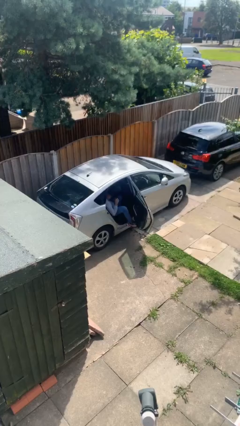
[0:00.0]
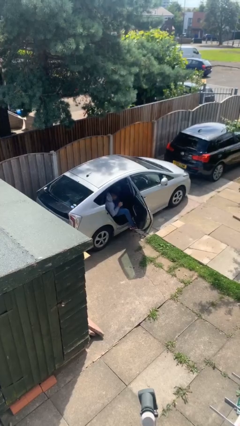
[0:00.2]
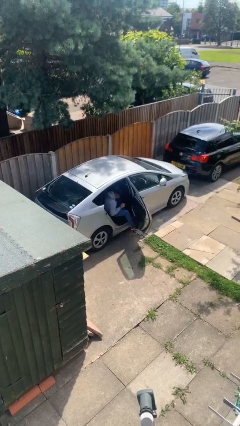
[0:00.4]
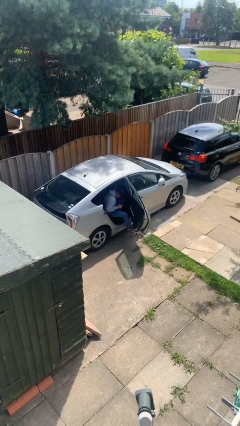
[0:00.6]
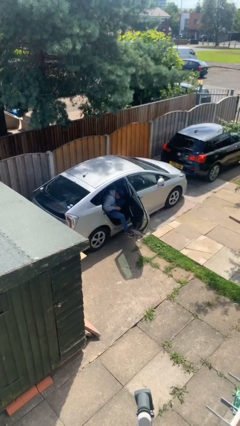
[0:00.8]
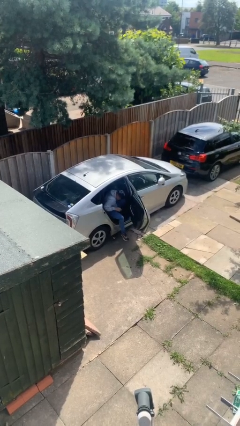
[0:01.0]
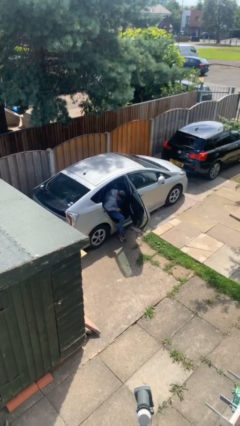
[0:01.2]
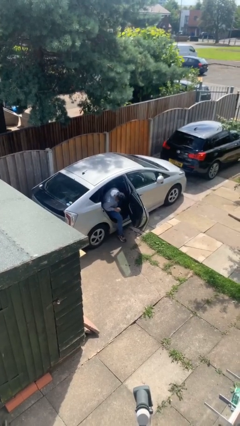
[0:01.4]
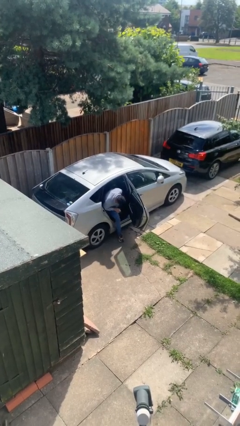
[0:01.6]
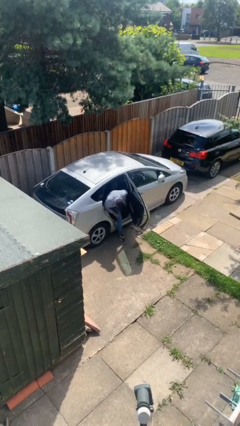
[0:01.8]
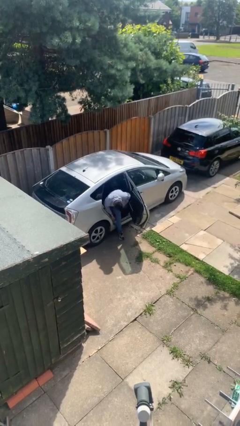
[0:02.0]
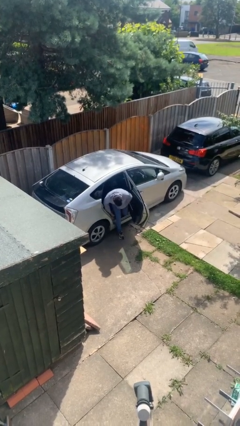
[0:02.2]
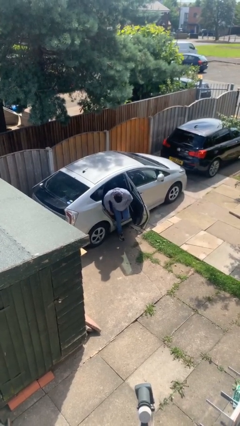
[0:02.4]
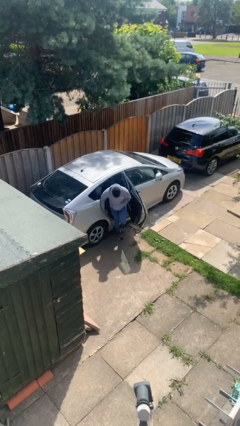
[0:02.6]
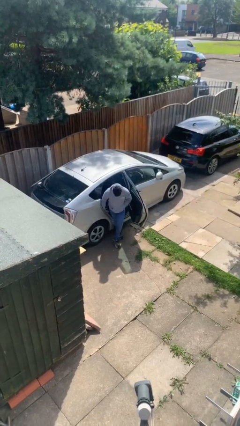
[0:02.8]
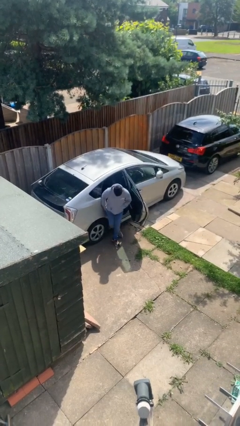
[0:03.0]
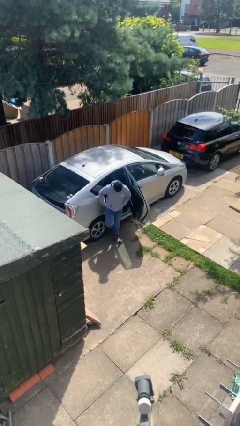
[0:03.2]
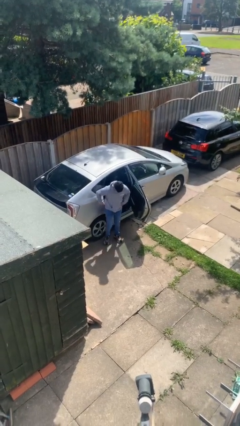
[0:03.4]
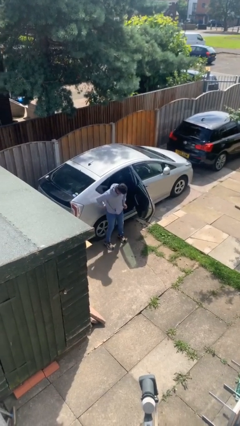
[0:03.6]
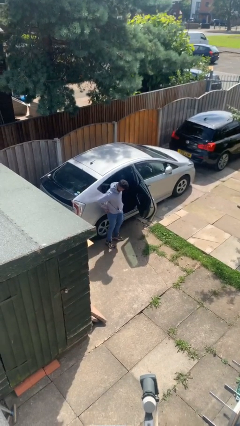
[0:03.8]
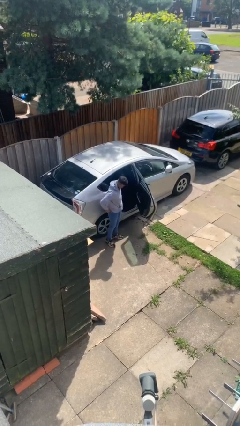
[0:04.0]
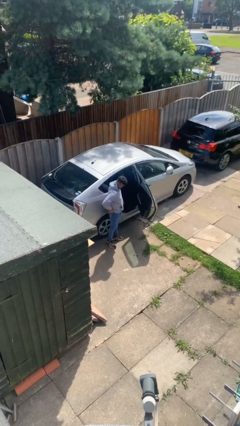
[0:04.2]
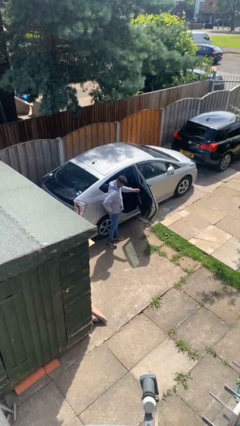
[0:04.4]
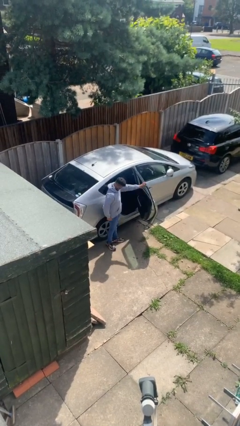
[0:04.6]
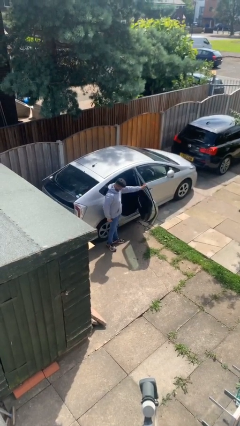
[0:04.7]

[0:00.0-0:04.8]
person exits car

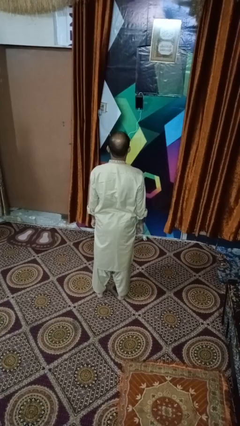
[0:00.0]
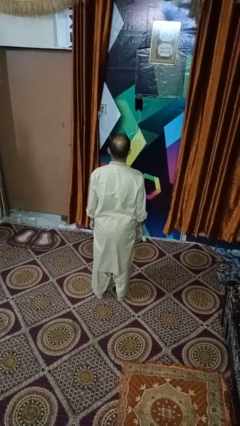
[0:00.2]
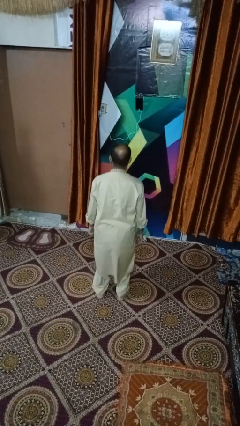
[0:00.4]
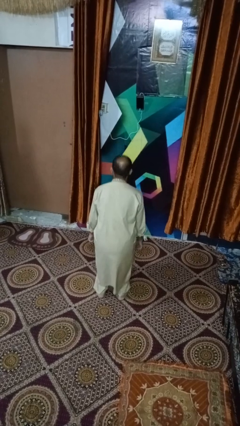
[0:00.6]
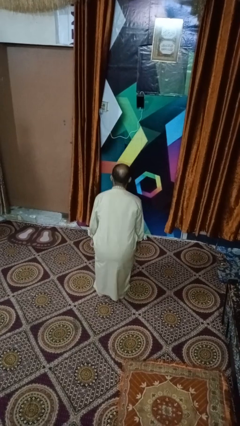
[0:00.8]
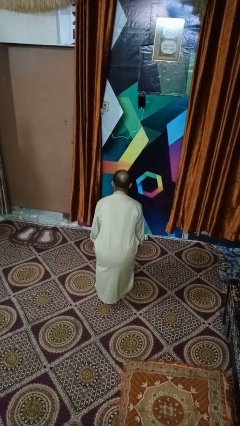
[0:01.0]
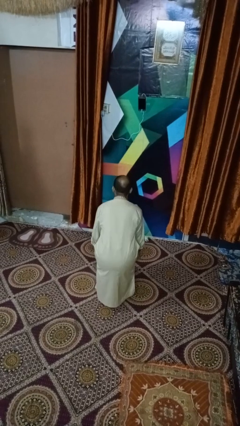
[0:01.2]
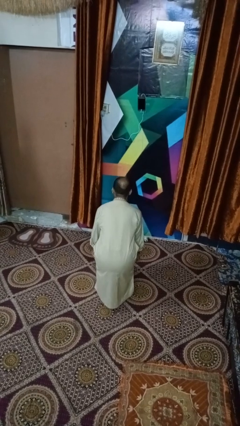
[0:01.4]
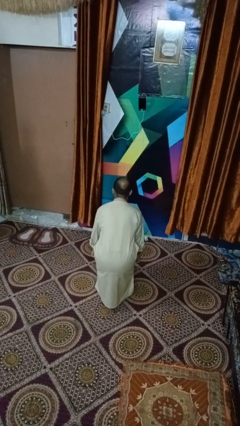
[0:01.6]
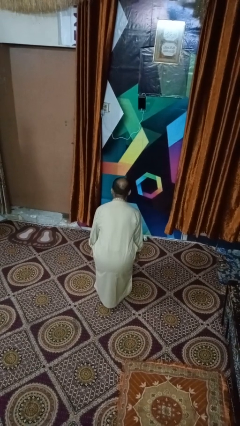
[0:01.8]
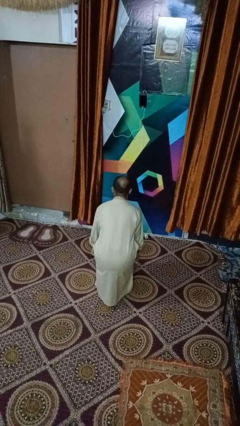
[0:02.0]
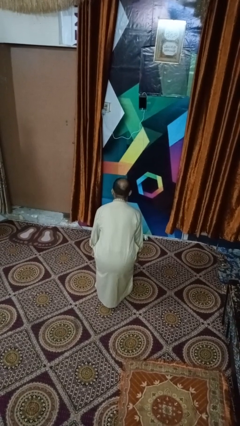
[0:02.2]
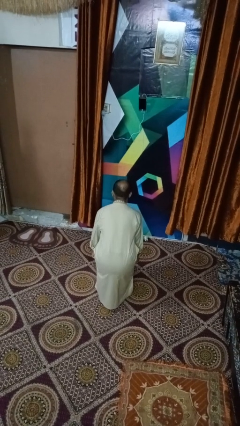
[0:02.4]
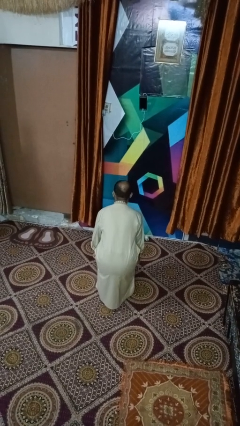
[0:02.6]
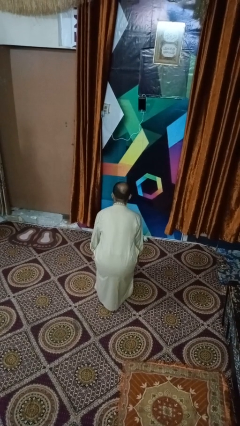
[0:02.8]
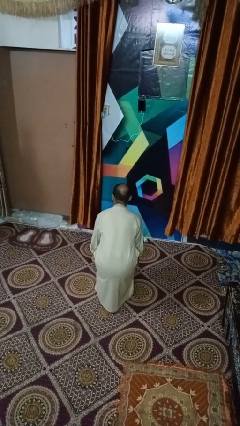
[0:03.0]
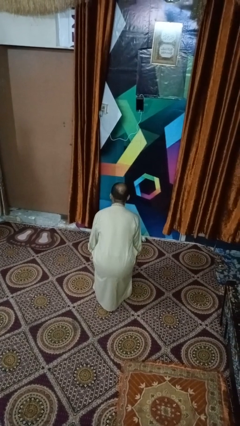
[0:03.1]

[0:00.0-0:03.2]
person squats

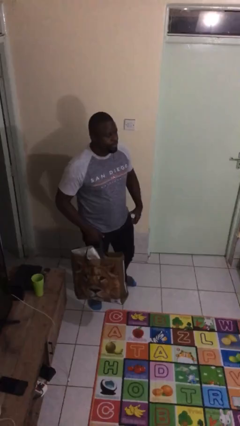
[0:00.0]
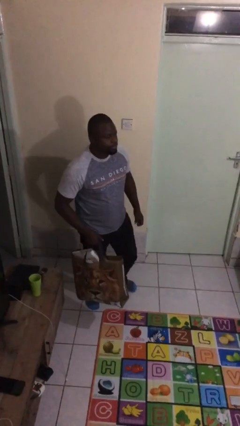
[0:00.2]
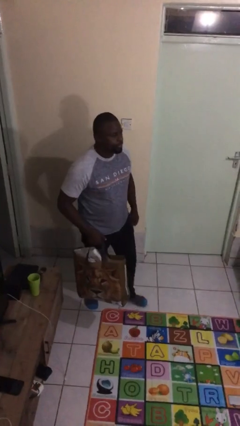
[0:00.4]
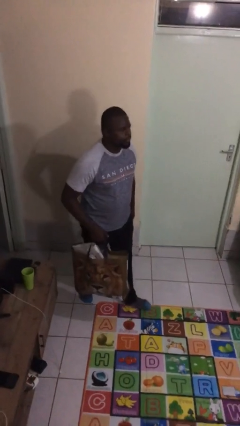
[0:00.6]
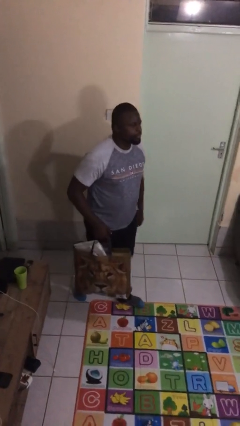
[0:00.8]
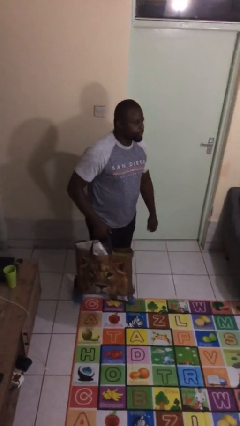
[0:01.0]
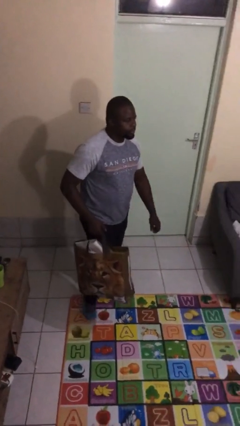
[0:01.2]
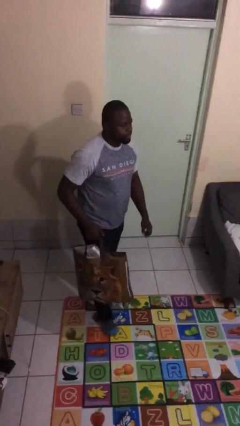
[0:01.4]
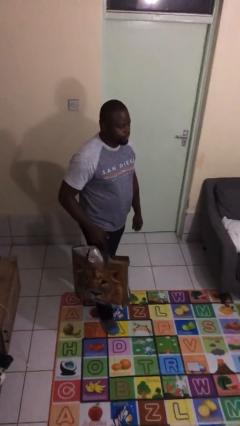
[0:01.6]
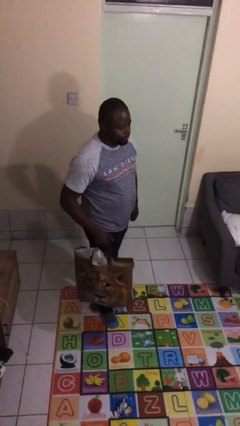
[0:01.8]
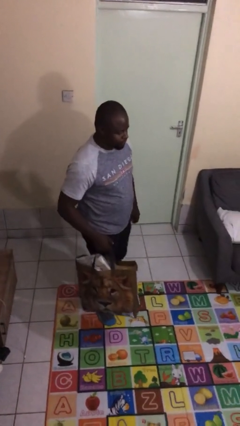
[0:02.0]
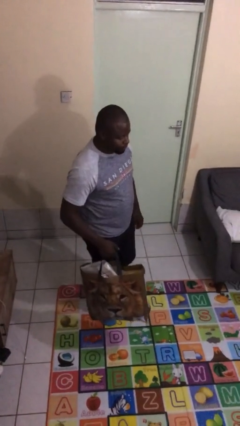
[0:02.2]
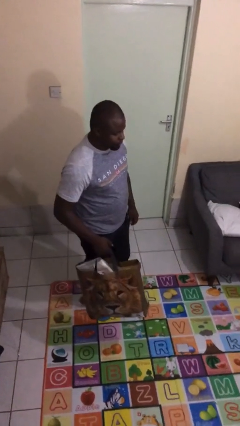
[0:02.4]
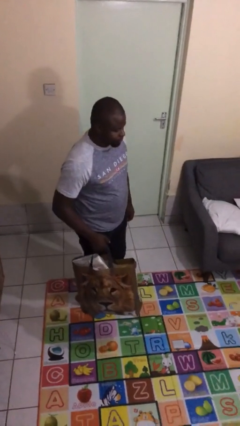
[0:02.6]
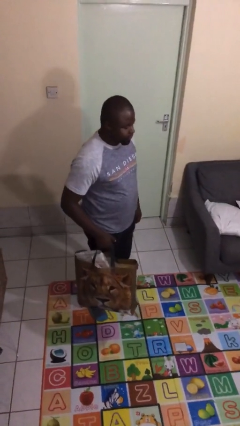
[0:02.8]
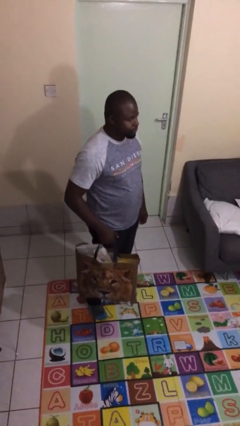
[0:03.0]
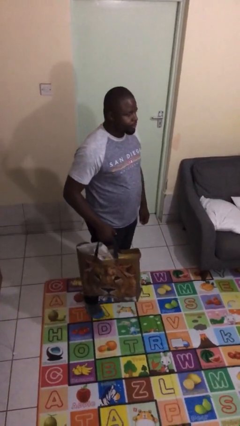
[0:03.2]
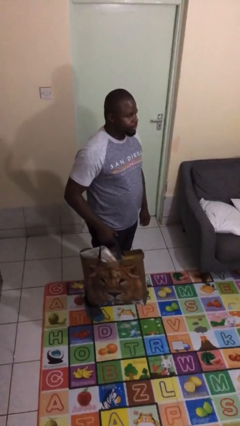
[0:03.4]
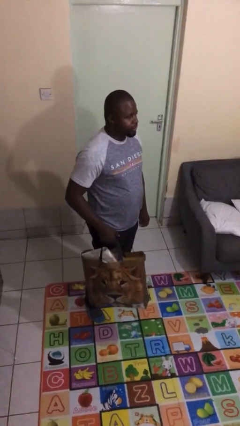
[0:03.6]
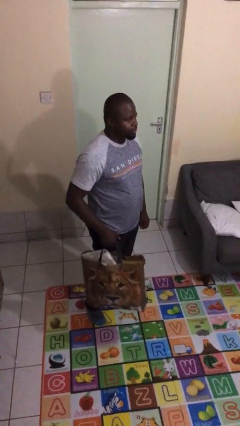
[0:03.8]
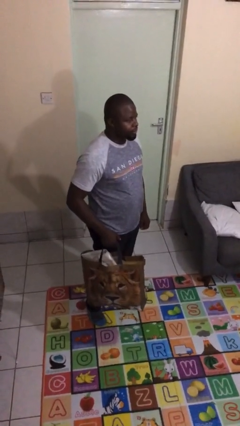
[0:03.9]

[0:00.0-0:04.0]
person carries groceries

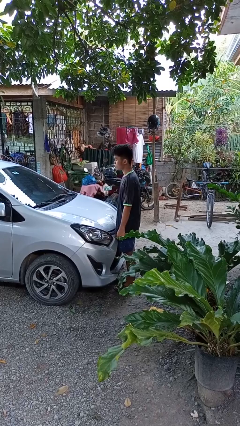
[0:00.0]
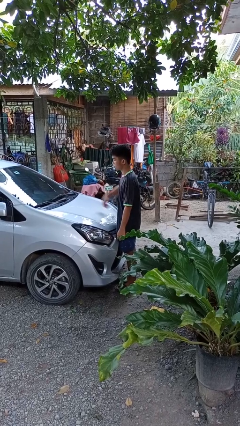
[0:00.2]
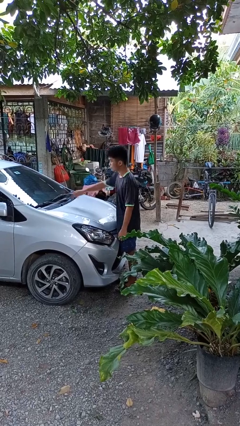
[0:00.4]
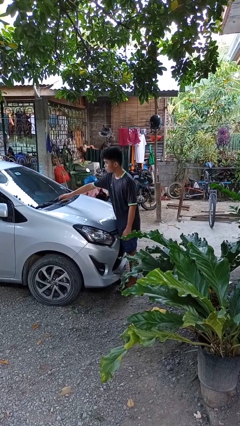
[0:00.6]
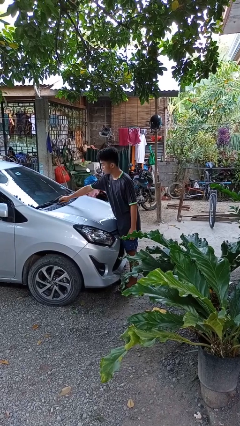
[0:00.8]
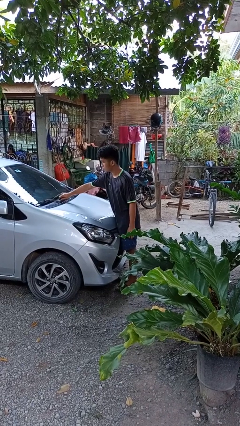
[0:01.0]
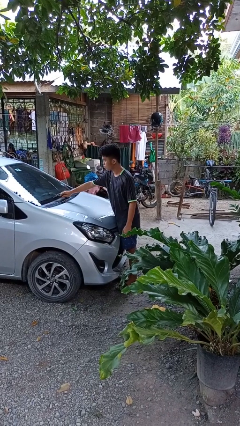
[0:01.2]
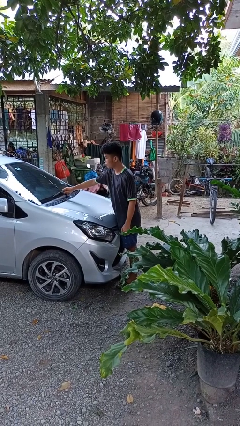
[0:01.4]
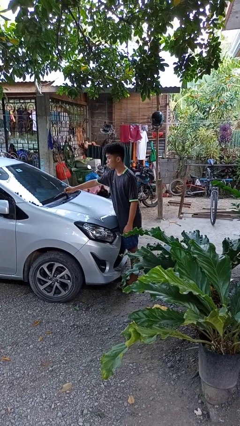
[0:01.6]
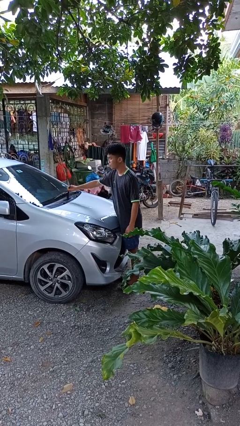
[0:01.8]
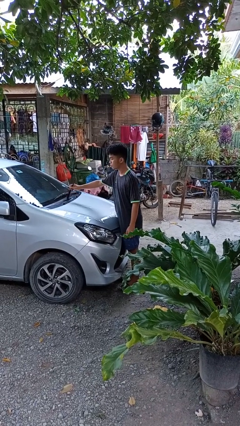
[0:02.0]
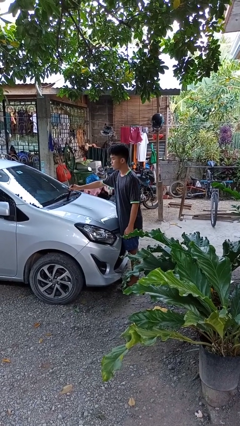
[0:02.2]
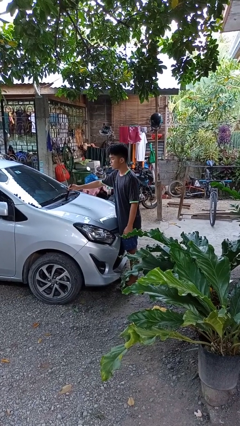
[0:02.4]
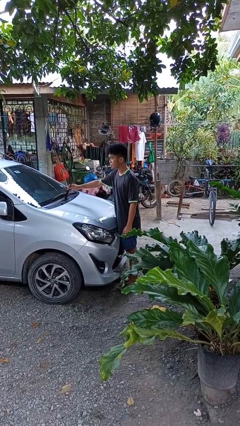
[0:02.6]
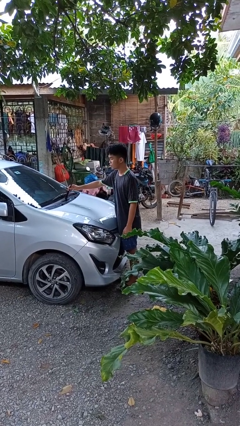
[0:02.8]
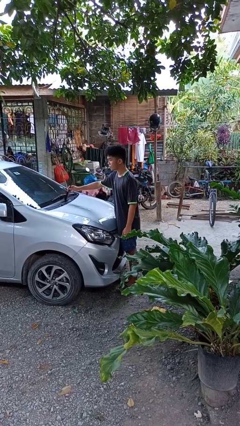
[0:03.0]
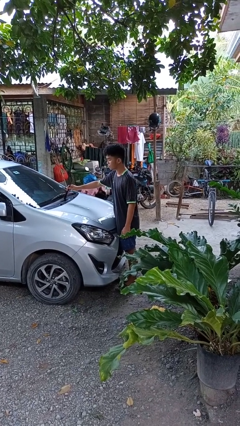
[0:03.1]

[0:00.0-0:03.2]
person flips up car wipers

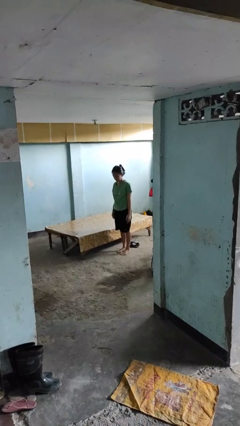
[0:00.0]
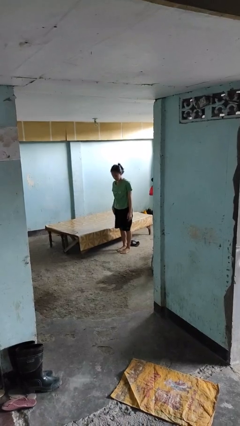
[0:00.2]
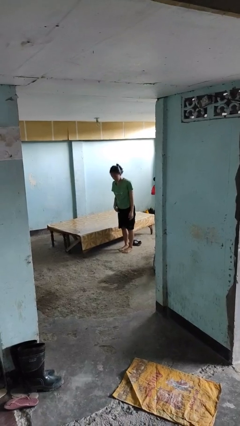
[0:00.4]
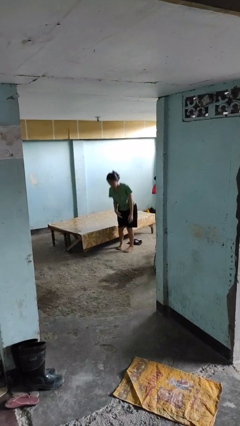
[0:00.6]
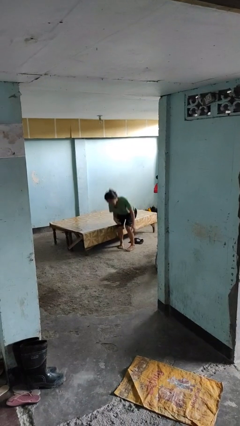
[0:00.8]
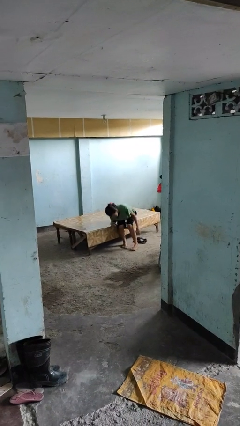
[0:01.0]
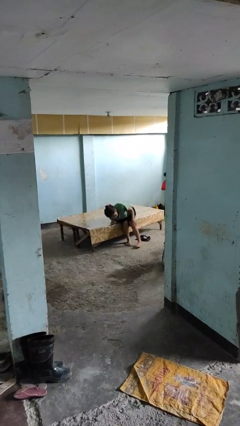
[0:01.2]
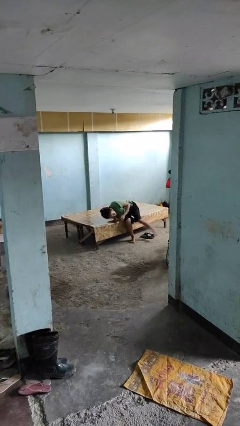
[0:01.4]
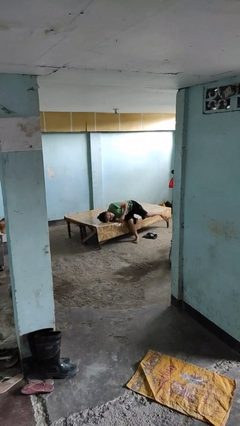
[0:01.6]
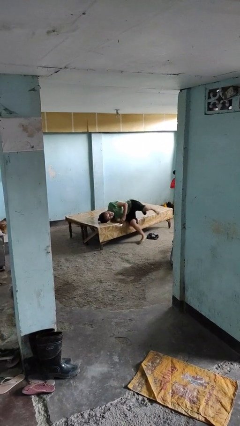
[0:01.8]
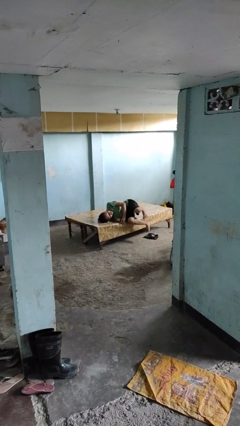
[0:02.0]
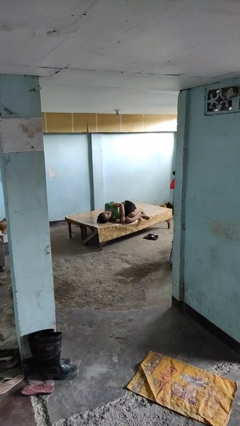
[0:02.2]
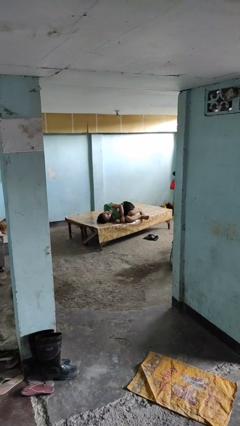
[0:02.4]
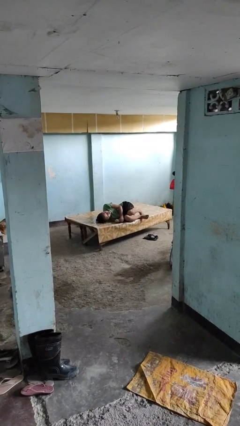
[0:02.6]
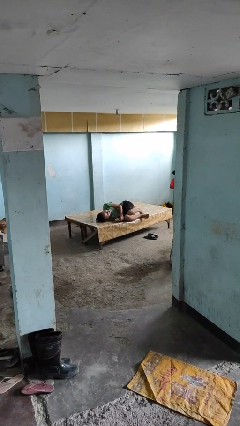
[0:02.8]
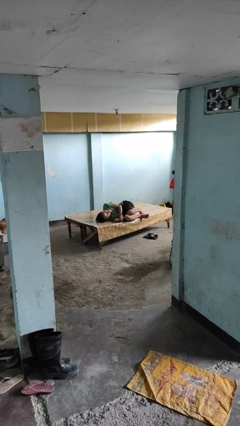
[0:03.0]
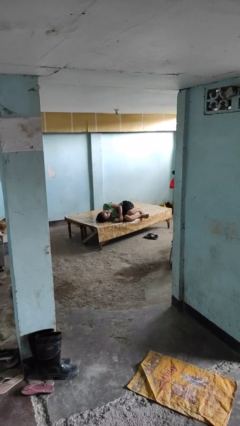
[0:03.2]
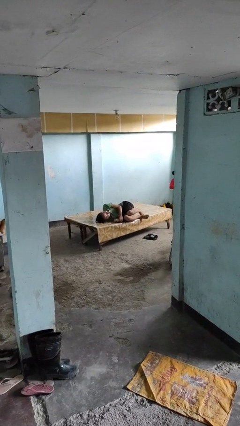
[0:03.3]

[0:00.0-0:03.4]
person lies down on bed
